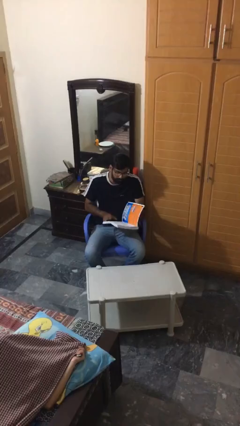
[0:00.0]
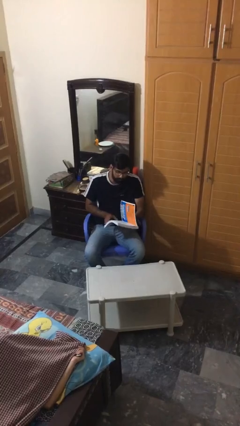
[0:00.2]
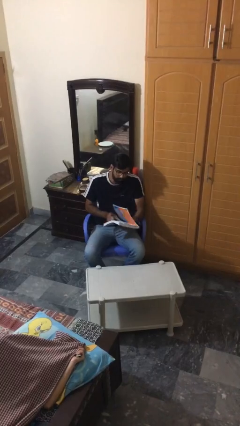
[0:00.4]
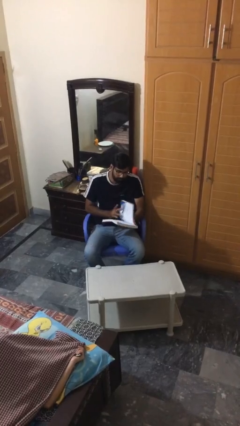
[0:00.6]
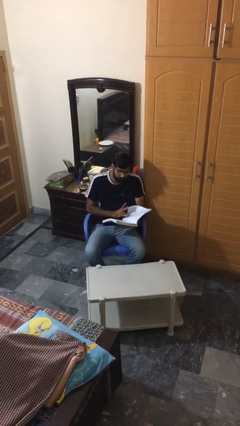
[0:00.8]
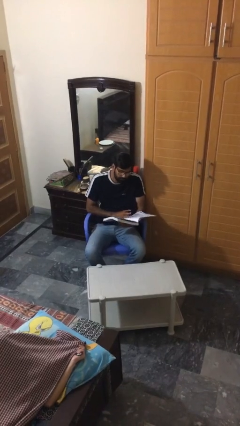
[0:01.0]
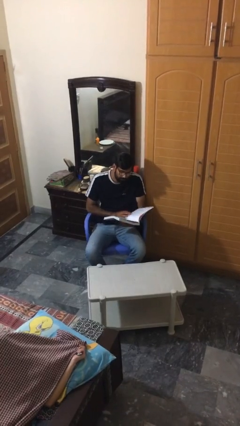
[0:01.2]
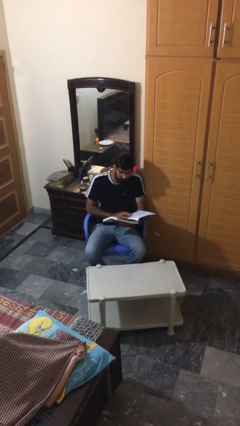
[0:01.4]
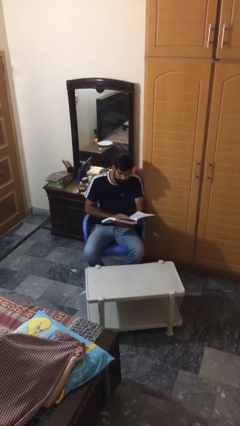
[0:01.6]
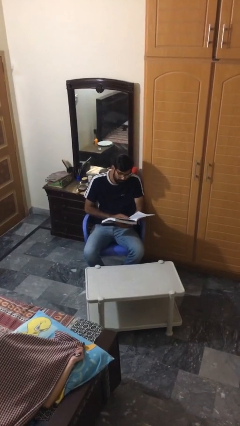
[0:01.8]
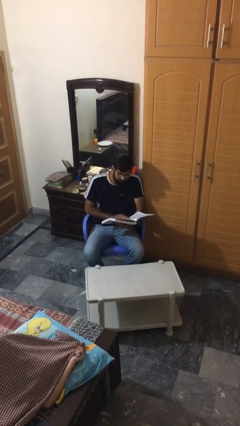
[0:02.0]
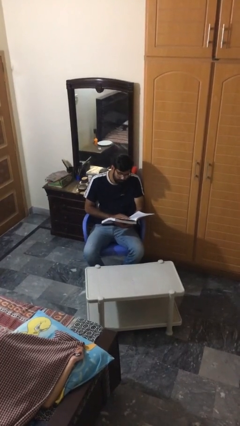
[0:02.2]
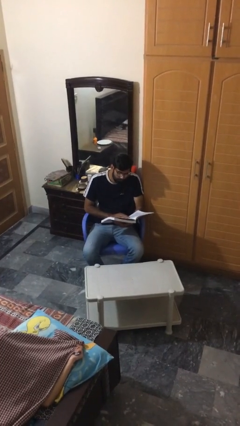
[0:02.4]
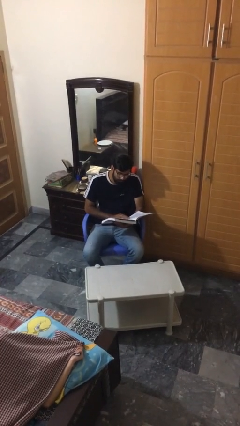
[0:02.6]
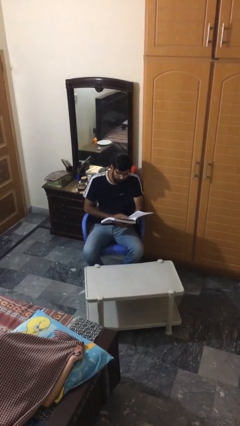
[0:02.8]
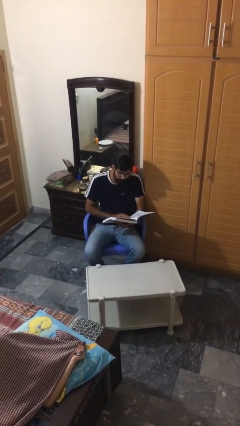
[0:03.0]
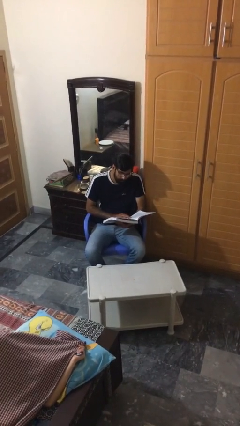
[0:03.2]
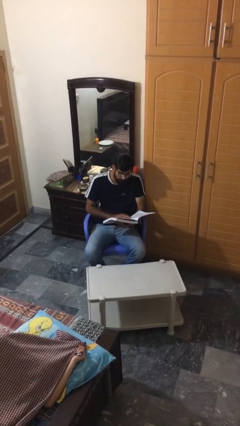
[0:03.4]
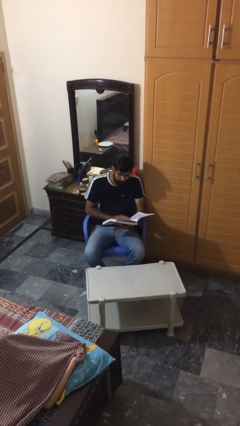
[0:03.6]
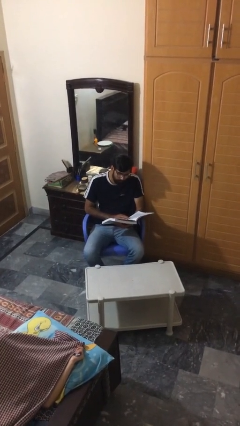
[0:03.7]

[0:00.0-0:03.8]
person reads document

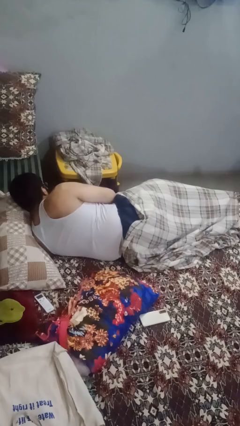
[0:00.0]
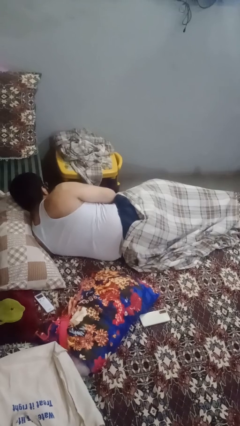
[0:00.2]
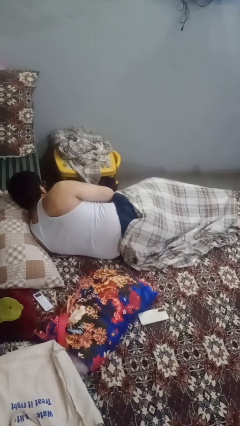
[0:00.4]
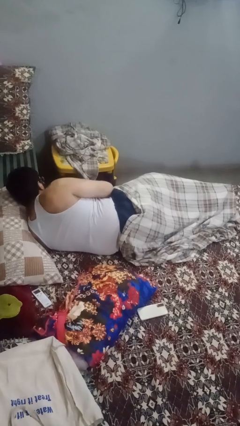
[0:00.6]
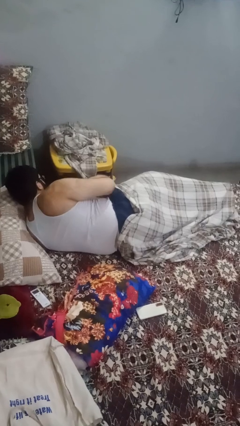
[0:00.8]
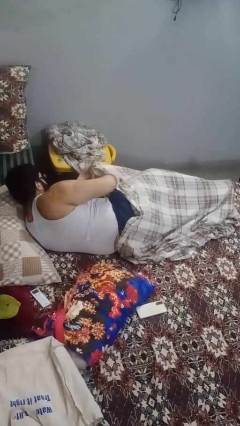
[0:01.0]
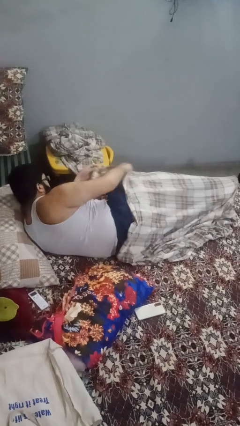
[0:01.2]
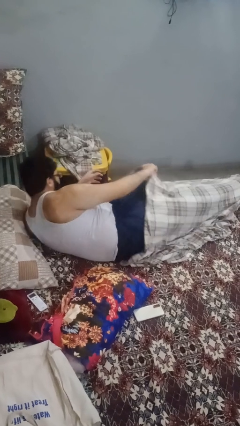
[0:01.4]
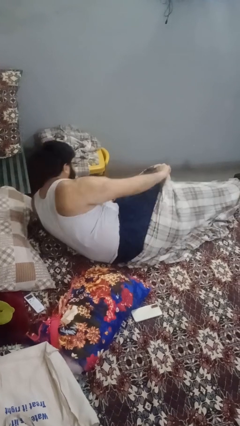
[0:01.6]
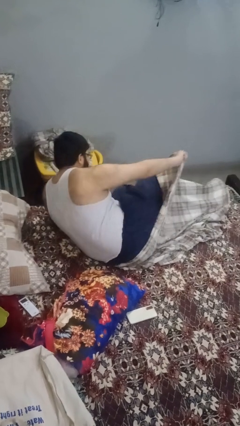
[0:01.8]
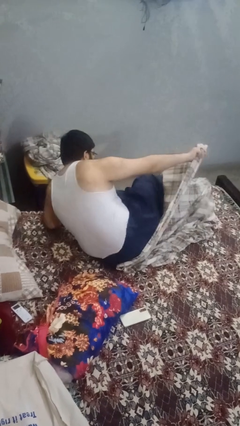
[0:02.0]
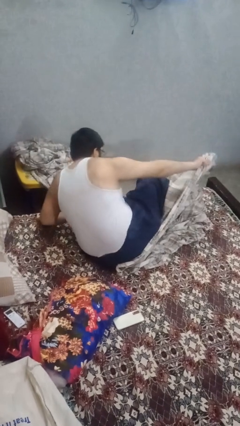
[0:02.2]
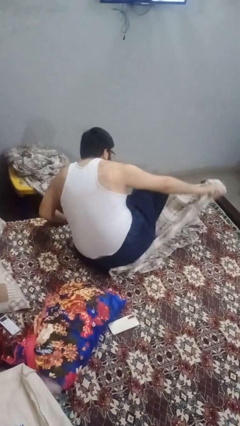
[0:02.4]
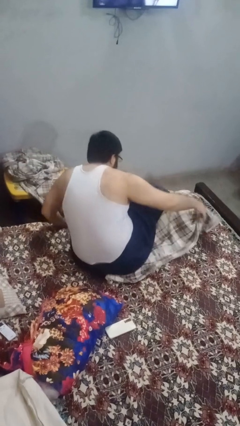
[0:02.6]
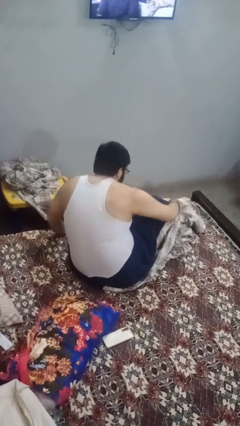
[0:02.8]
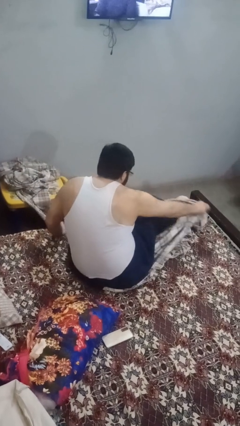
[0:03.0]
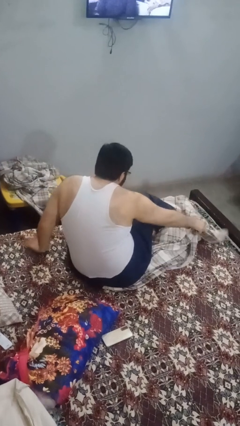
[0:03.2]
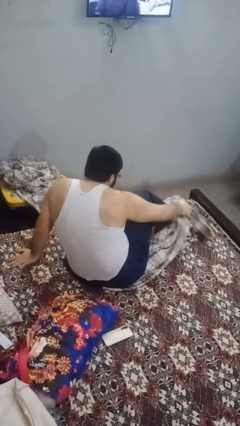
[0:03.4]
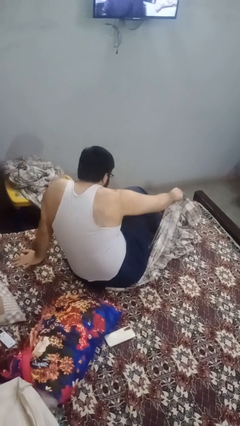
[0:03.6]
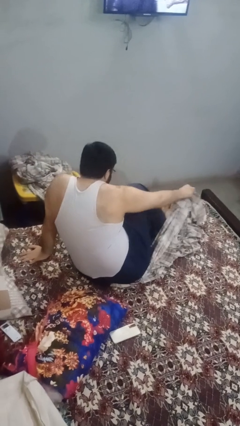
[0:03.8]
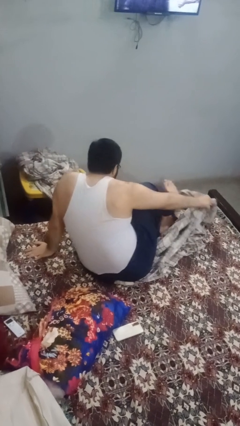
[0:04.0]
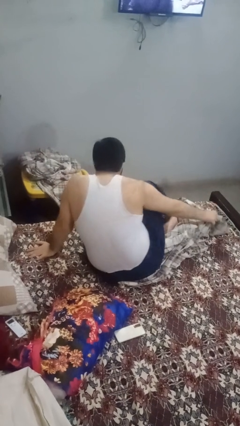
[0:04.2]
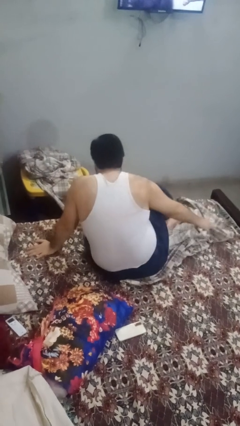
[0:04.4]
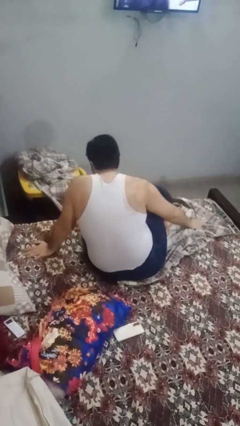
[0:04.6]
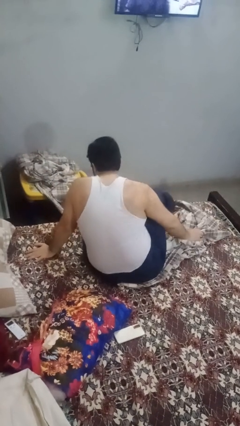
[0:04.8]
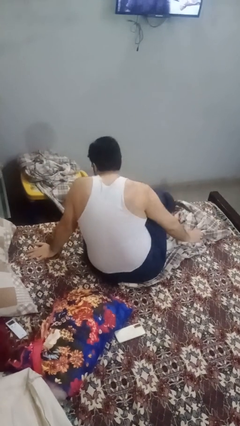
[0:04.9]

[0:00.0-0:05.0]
person uncovers with blanket

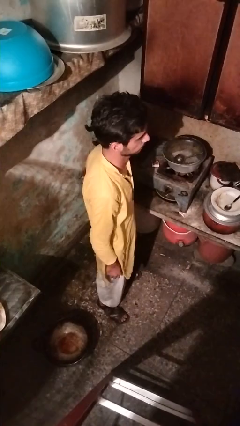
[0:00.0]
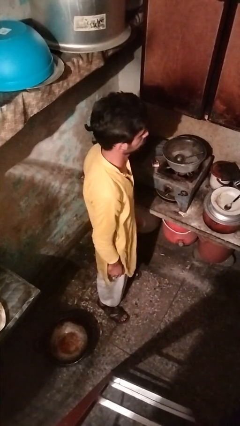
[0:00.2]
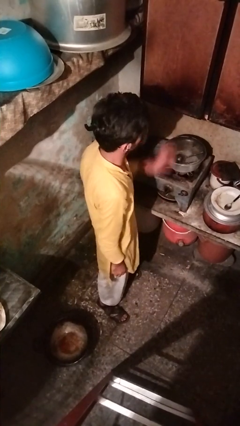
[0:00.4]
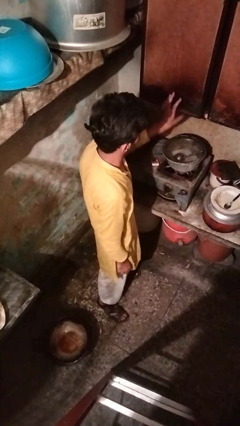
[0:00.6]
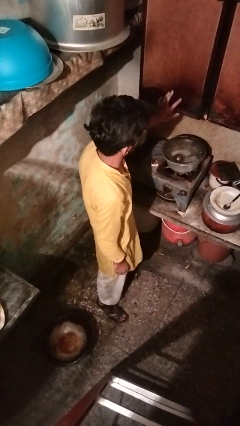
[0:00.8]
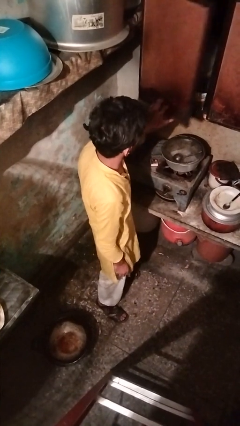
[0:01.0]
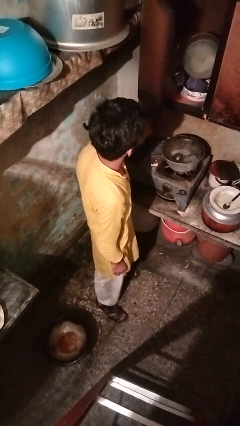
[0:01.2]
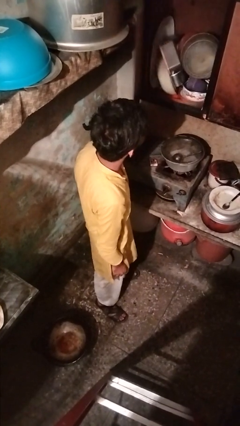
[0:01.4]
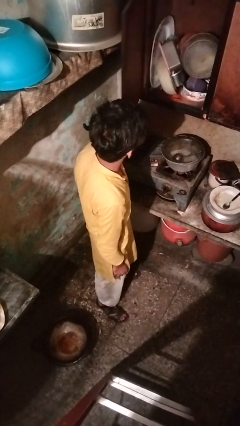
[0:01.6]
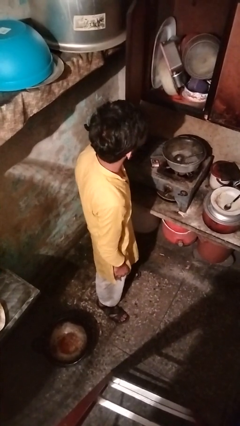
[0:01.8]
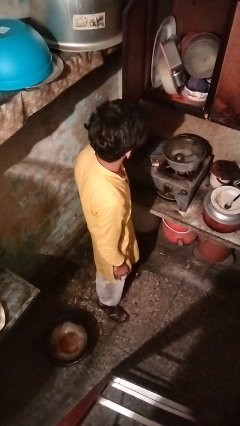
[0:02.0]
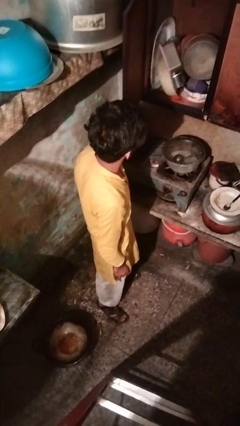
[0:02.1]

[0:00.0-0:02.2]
person opens cabinet

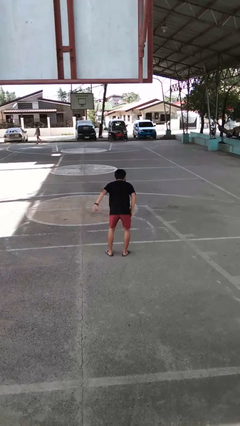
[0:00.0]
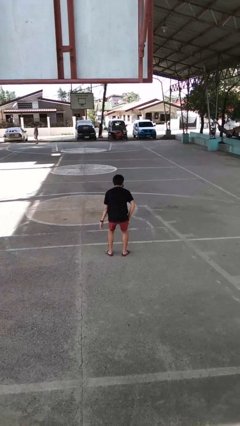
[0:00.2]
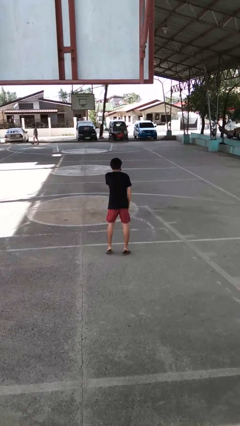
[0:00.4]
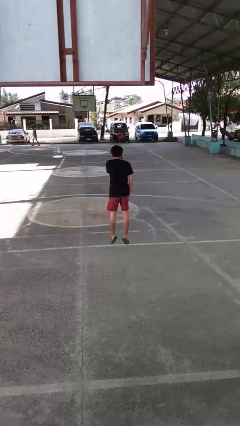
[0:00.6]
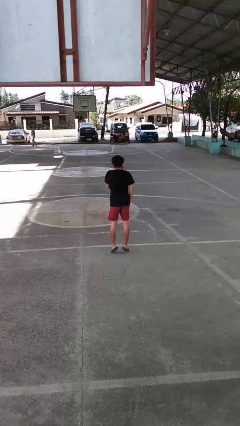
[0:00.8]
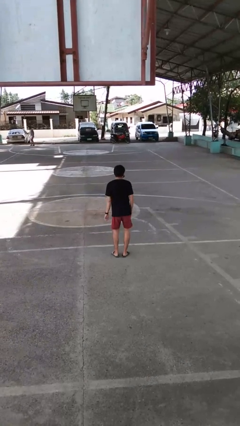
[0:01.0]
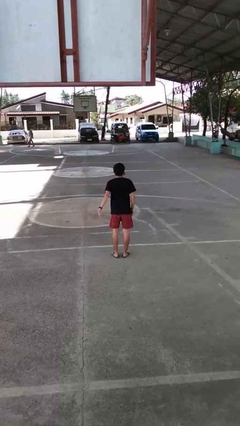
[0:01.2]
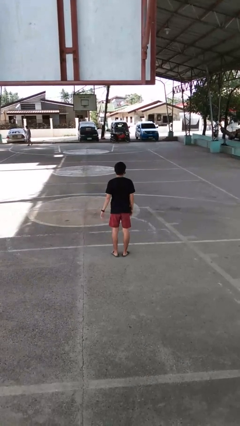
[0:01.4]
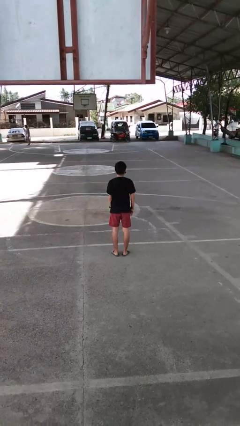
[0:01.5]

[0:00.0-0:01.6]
person jumps

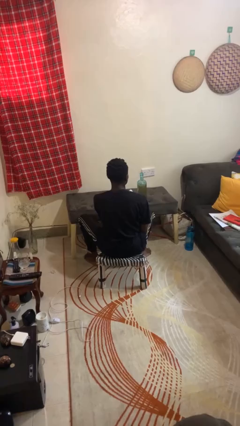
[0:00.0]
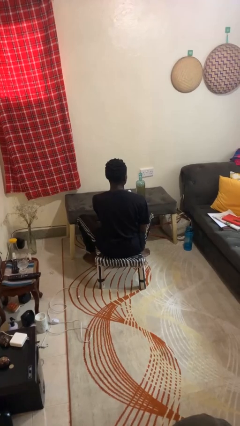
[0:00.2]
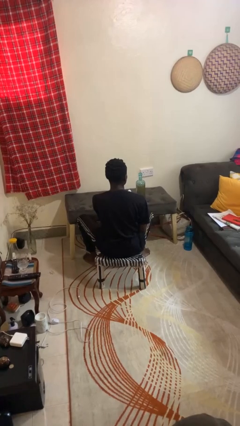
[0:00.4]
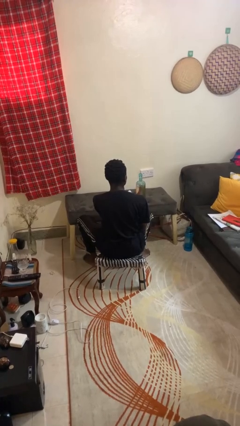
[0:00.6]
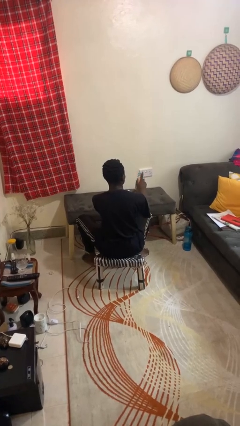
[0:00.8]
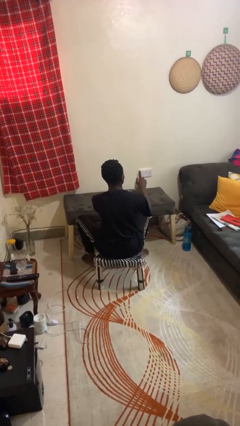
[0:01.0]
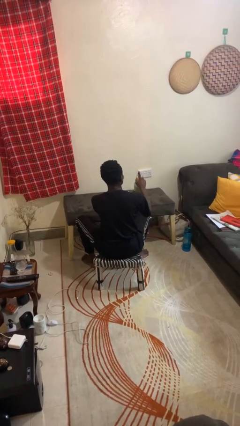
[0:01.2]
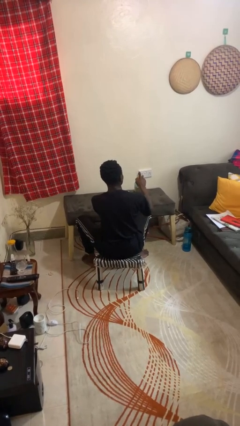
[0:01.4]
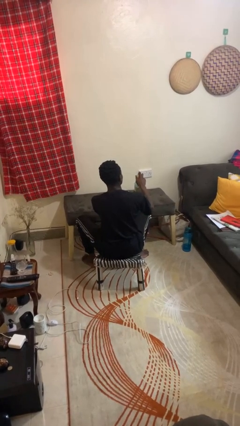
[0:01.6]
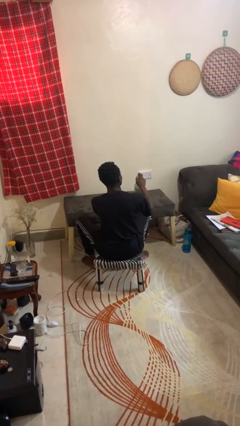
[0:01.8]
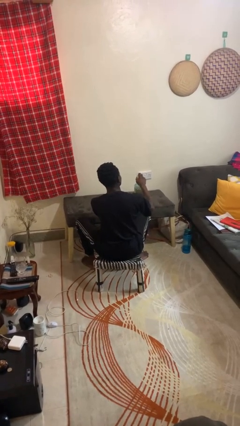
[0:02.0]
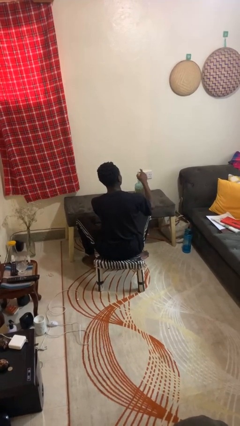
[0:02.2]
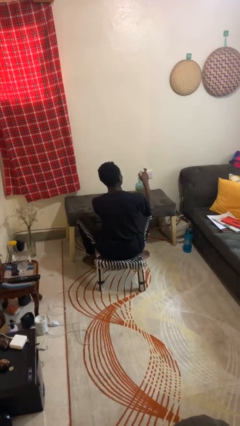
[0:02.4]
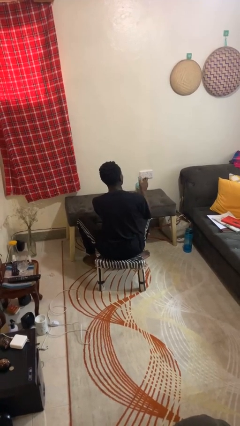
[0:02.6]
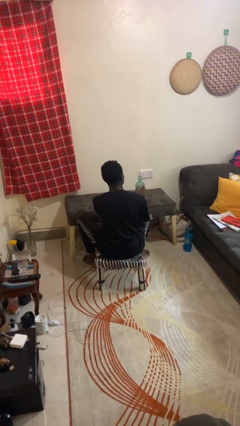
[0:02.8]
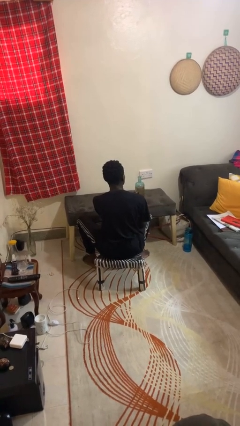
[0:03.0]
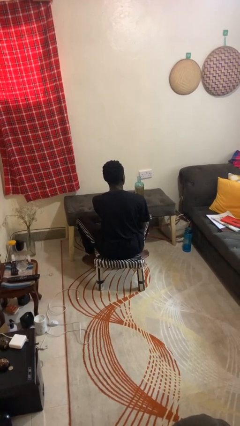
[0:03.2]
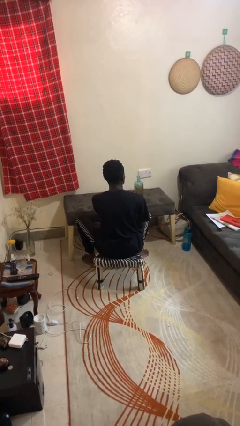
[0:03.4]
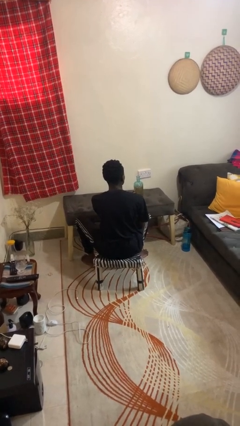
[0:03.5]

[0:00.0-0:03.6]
person opens jar

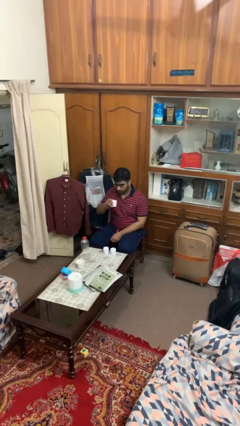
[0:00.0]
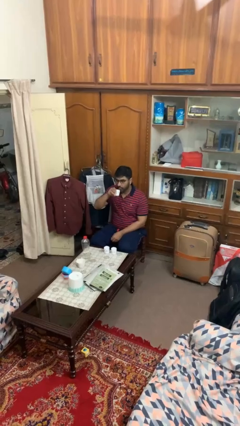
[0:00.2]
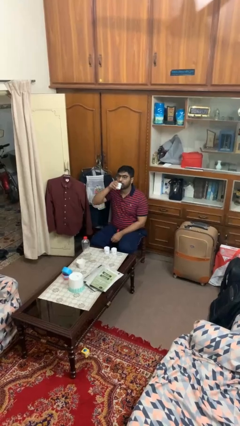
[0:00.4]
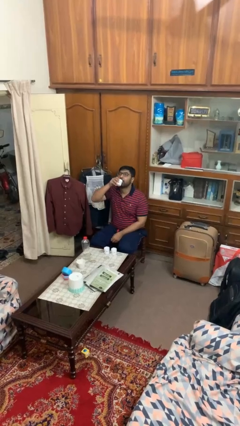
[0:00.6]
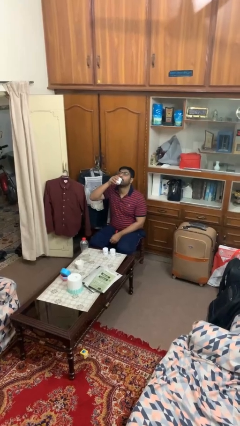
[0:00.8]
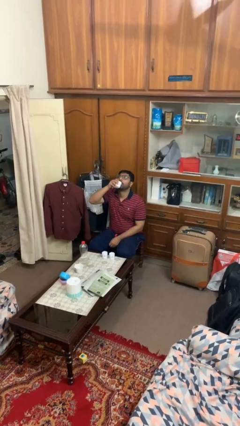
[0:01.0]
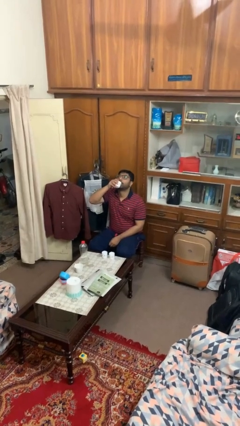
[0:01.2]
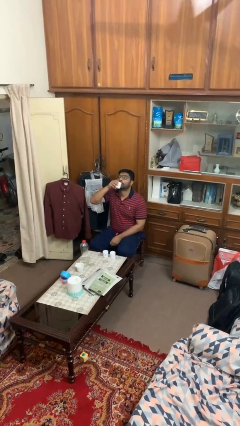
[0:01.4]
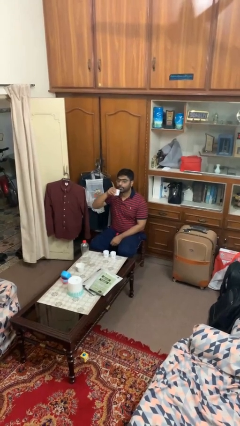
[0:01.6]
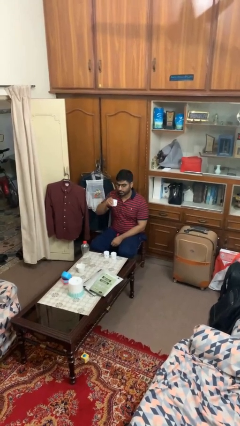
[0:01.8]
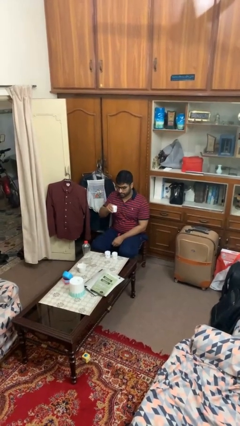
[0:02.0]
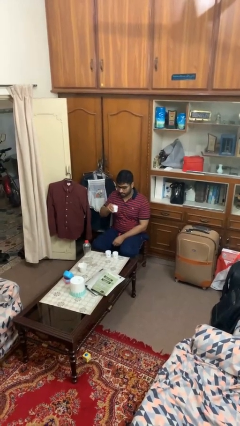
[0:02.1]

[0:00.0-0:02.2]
person drinks from shotglass
